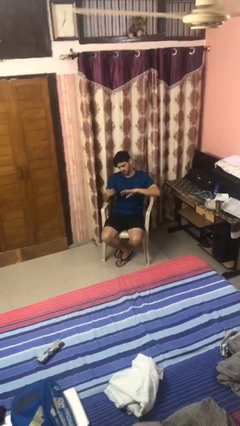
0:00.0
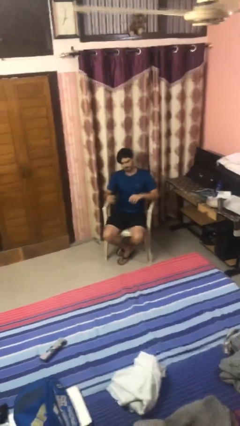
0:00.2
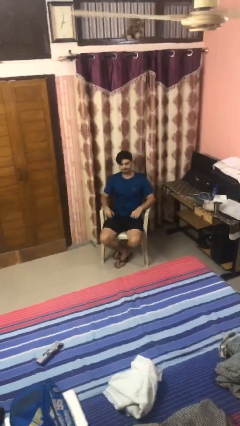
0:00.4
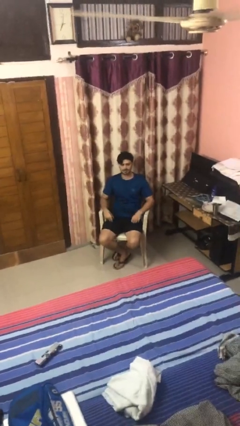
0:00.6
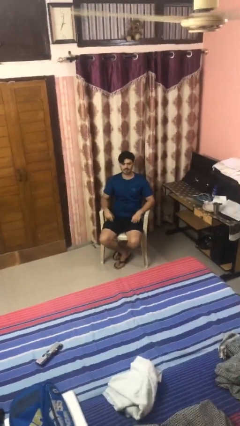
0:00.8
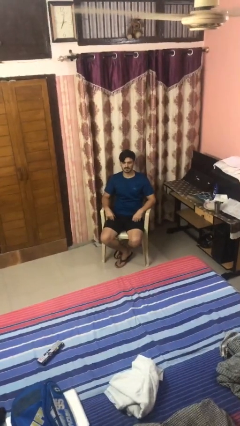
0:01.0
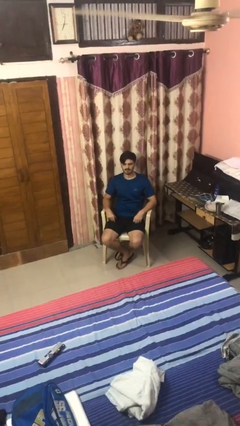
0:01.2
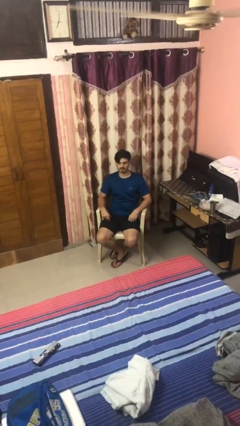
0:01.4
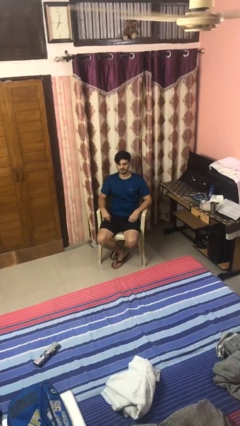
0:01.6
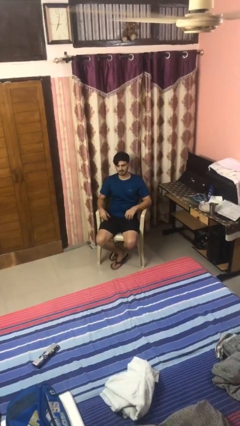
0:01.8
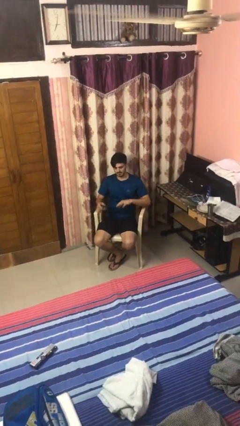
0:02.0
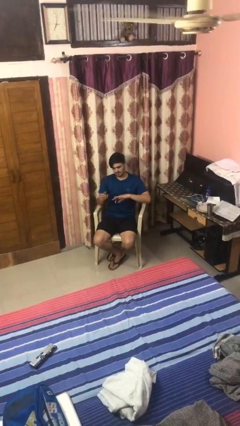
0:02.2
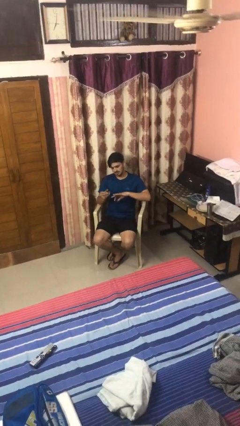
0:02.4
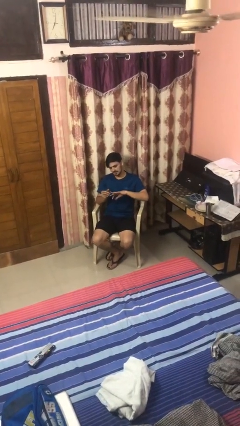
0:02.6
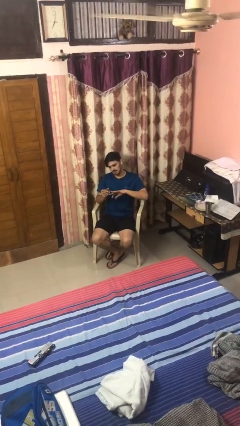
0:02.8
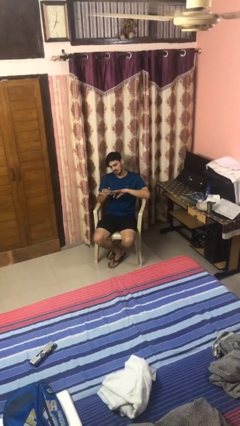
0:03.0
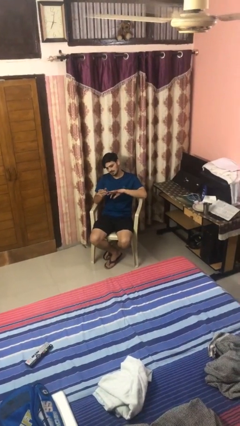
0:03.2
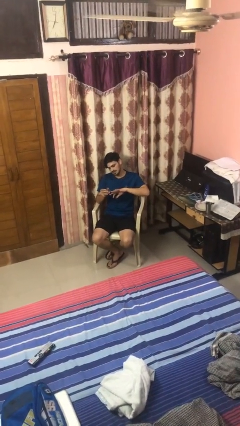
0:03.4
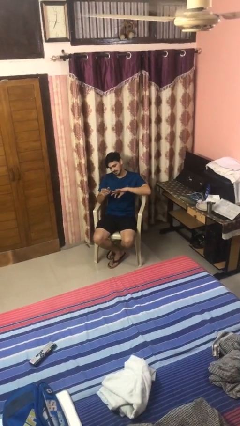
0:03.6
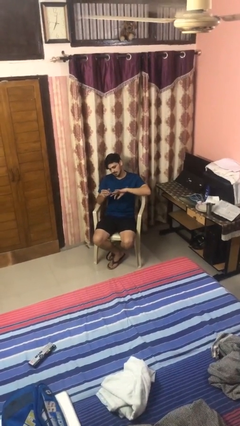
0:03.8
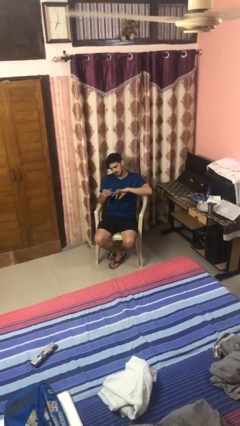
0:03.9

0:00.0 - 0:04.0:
person clips fingernails

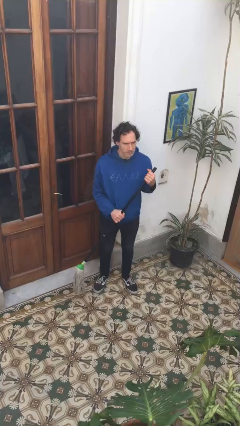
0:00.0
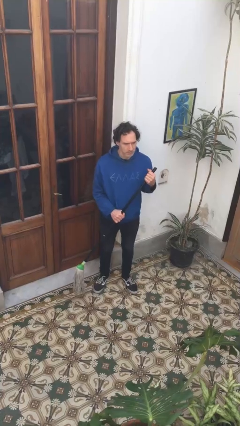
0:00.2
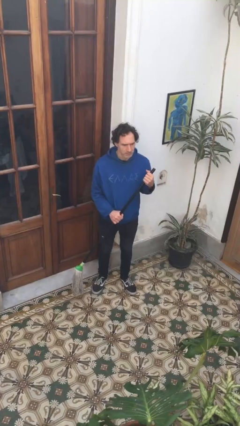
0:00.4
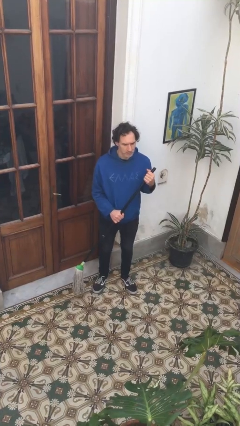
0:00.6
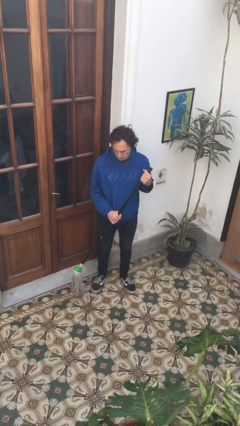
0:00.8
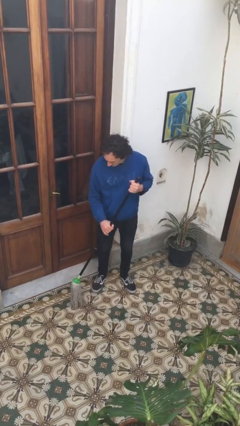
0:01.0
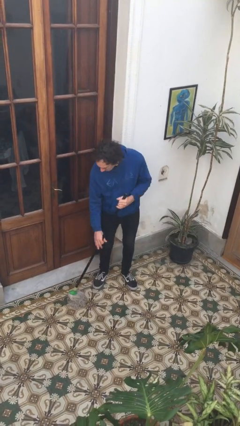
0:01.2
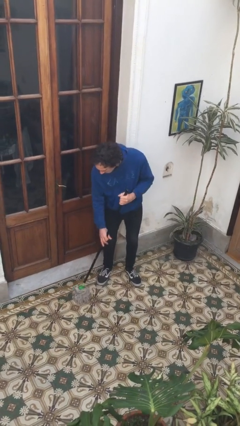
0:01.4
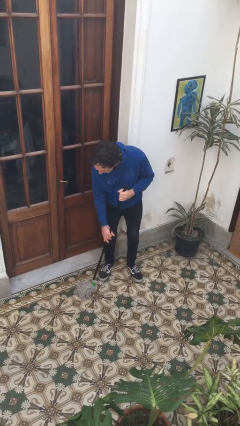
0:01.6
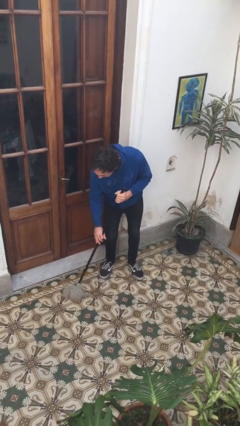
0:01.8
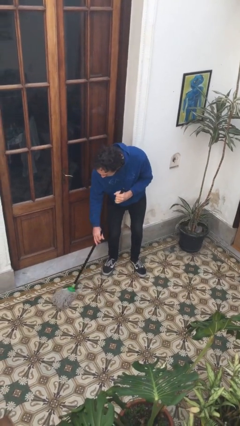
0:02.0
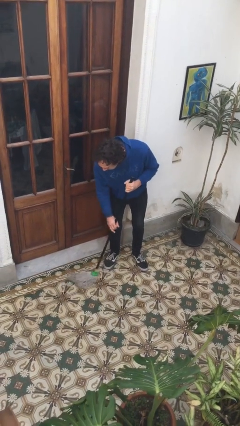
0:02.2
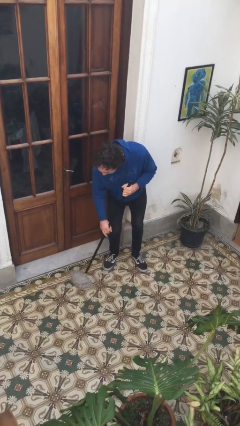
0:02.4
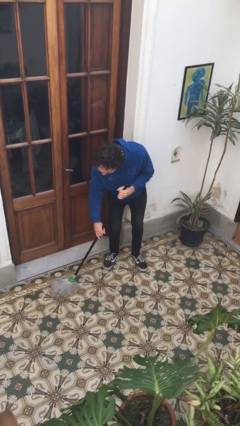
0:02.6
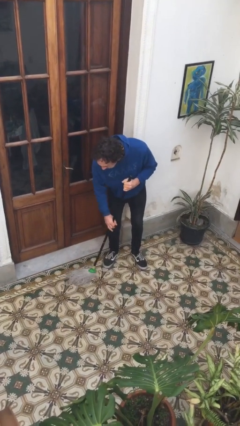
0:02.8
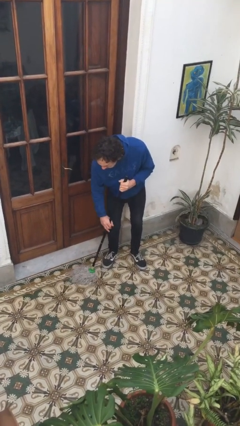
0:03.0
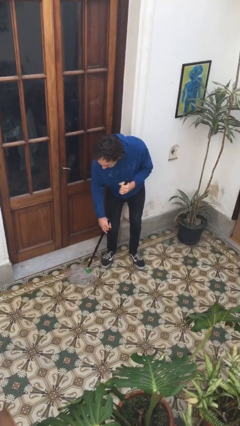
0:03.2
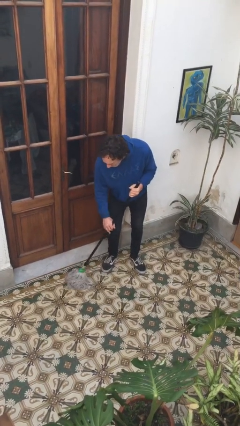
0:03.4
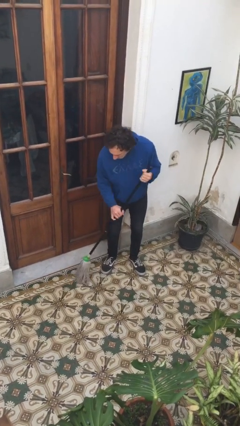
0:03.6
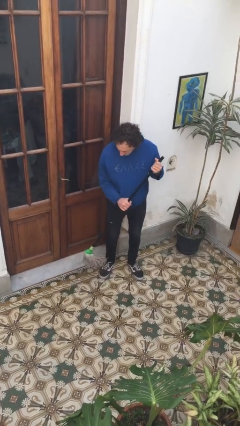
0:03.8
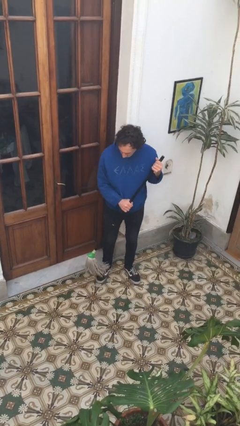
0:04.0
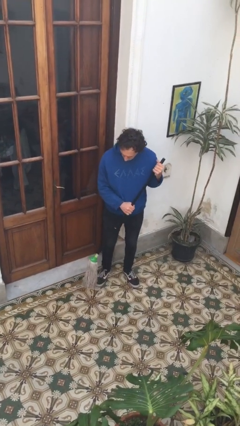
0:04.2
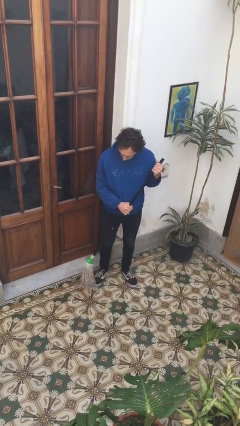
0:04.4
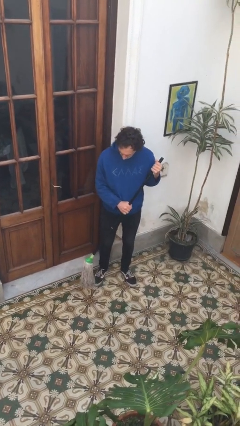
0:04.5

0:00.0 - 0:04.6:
person mops

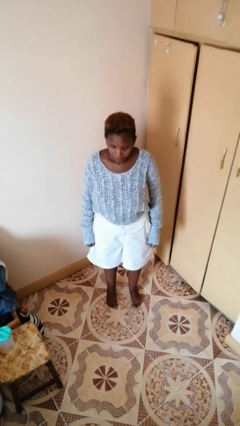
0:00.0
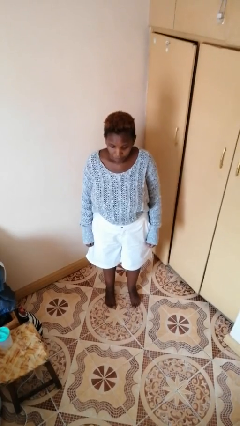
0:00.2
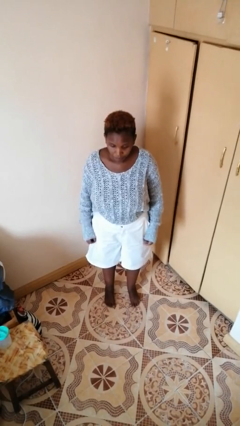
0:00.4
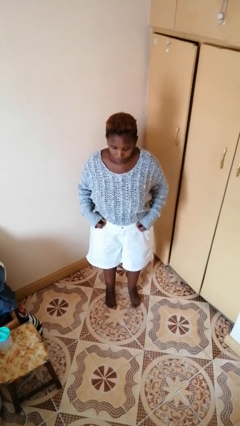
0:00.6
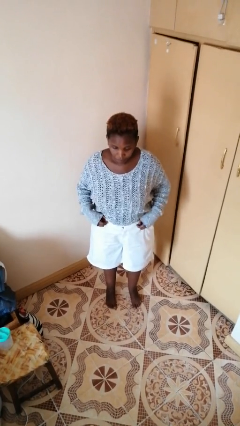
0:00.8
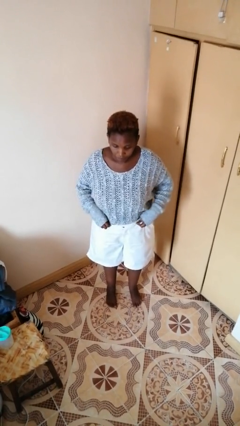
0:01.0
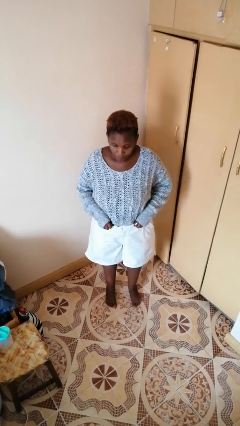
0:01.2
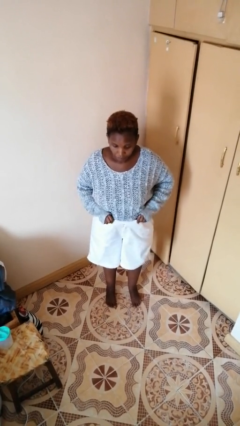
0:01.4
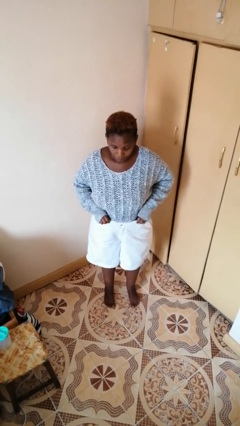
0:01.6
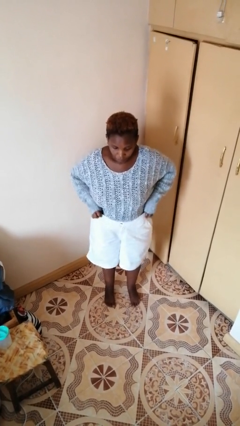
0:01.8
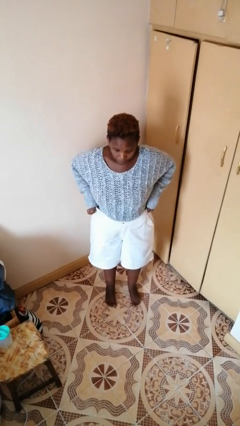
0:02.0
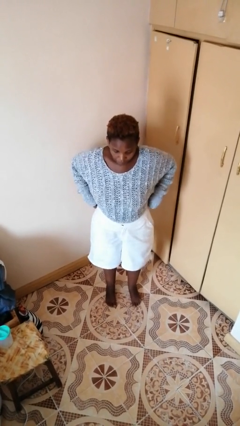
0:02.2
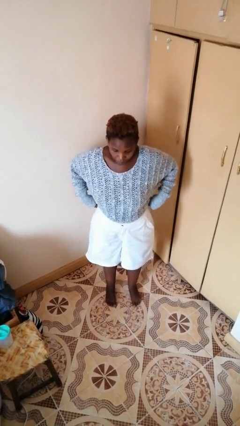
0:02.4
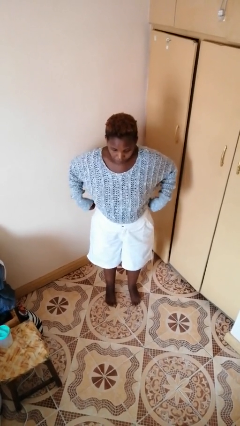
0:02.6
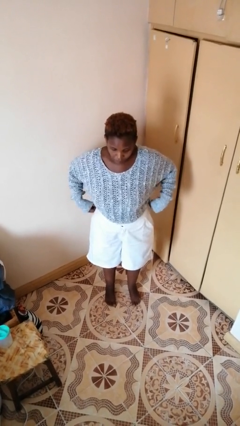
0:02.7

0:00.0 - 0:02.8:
person hikes up pants

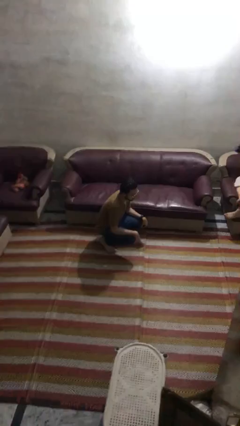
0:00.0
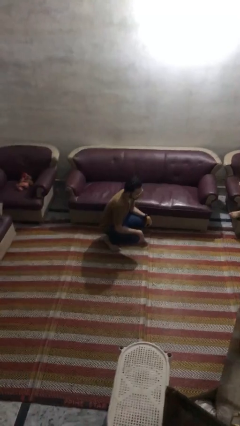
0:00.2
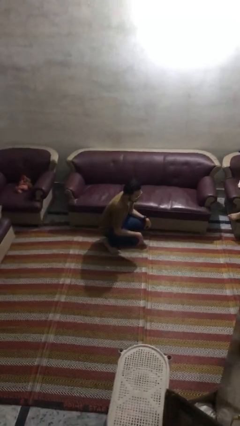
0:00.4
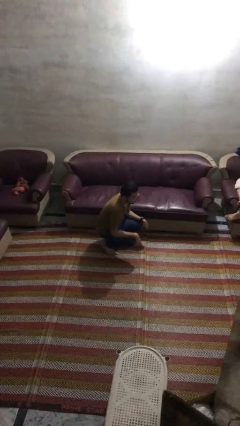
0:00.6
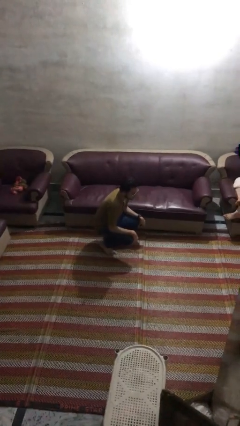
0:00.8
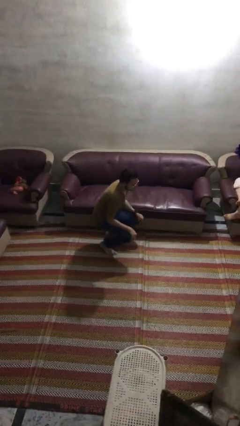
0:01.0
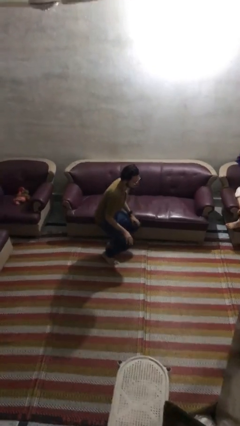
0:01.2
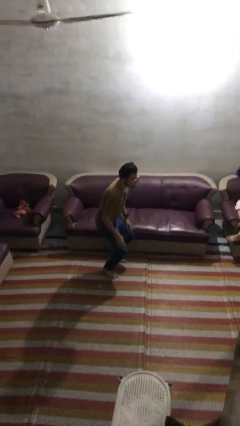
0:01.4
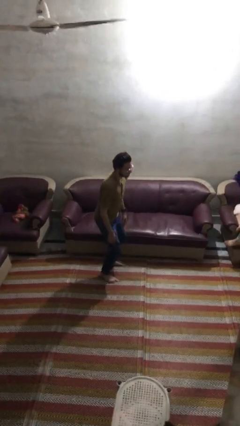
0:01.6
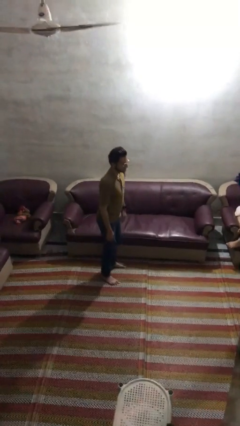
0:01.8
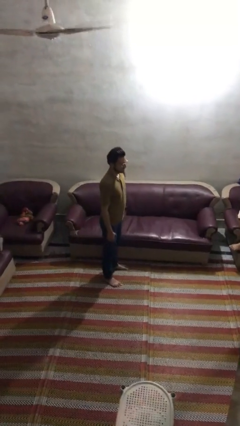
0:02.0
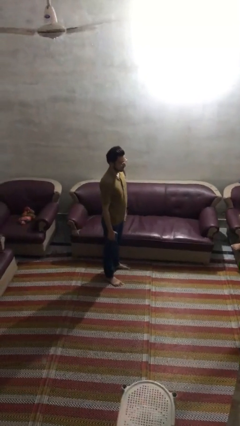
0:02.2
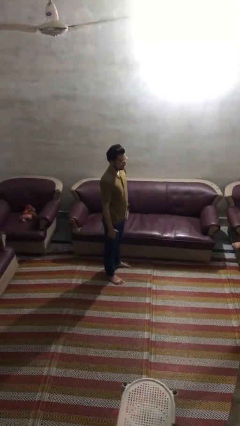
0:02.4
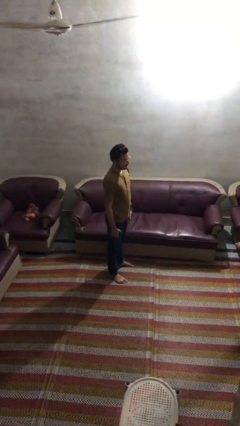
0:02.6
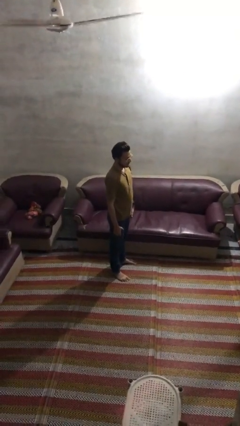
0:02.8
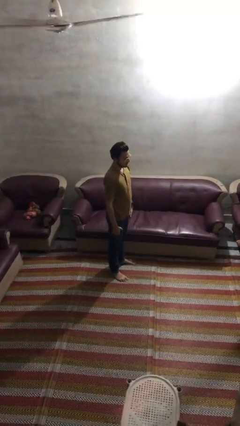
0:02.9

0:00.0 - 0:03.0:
person stands up

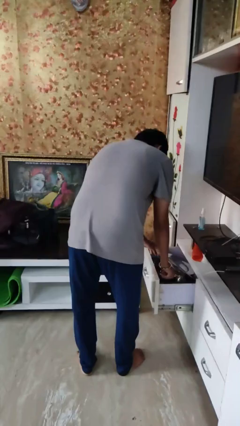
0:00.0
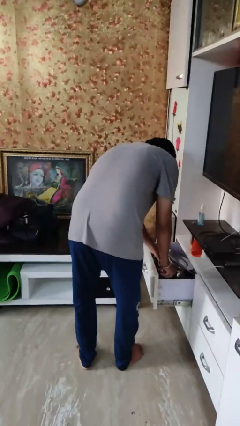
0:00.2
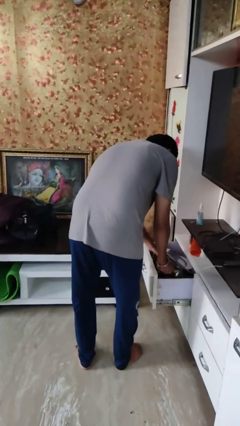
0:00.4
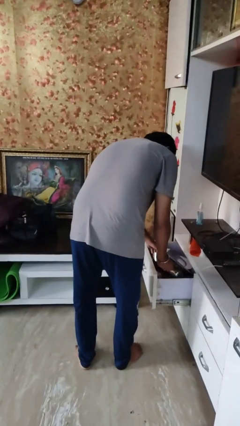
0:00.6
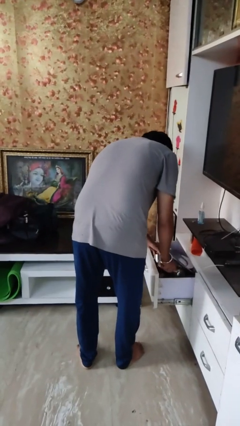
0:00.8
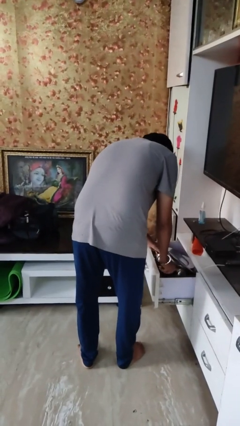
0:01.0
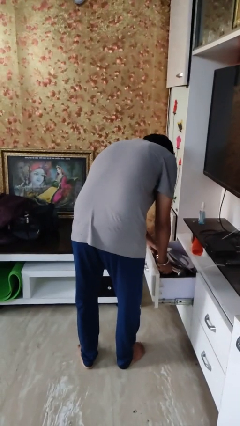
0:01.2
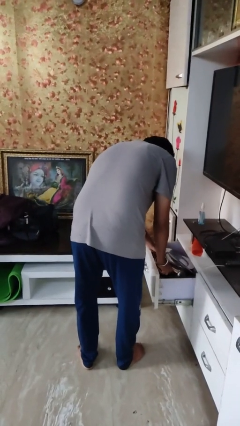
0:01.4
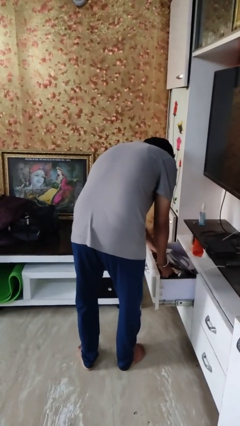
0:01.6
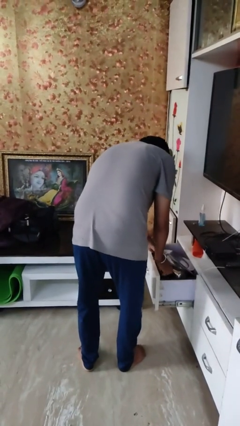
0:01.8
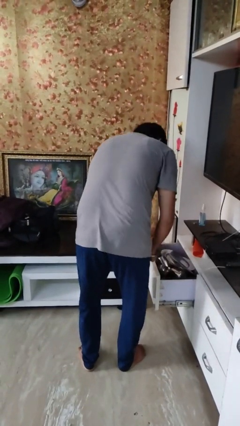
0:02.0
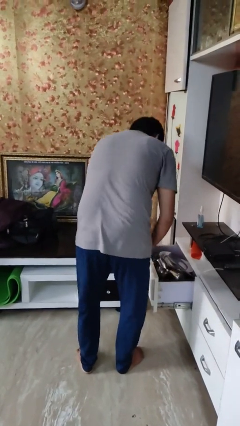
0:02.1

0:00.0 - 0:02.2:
person searches in kitchen drawer

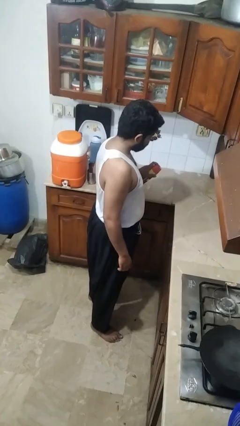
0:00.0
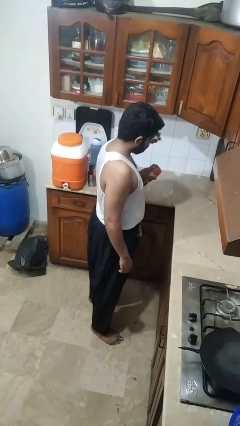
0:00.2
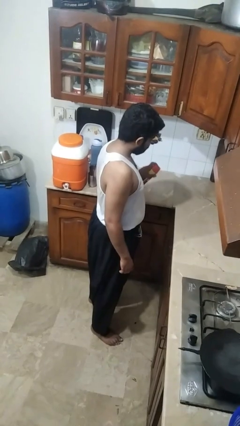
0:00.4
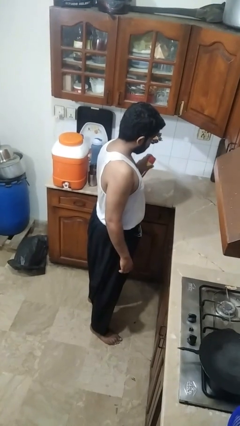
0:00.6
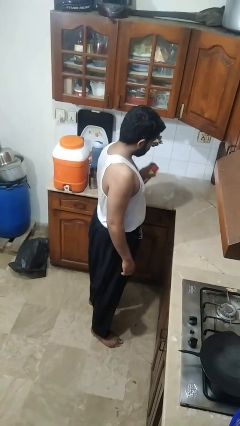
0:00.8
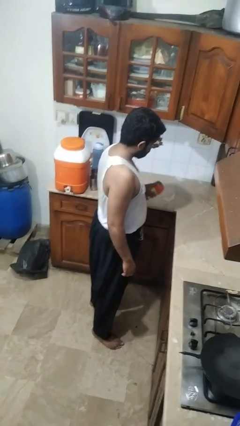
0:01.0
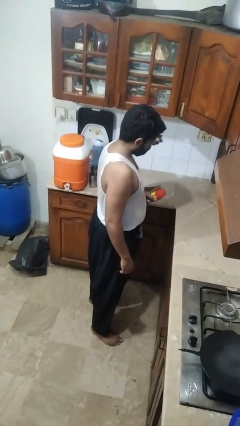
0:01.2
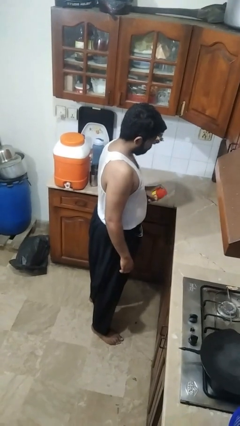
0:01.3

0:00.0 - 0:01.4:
person sprays from bottle
